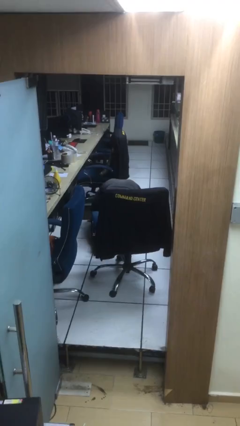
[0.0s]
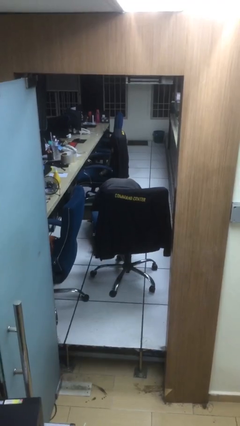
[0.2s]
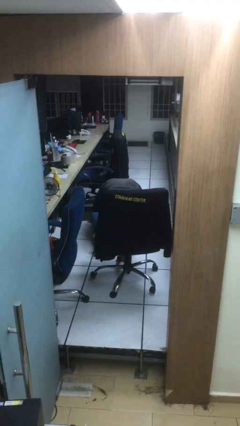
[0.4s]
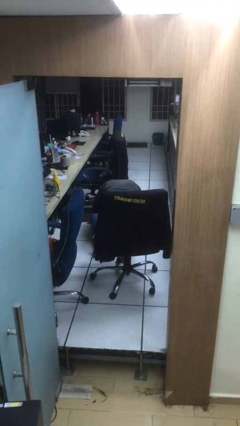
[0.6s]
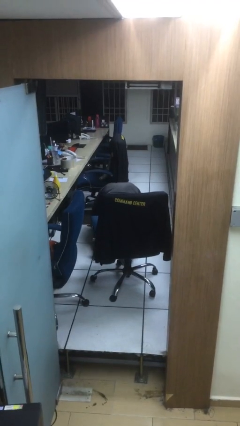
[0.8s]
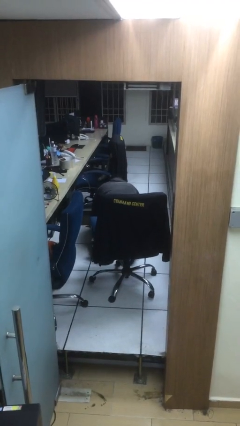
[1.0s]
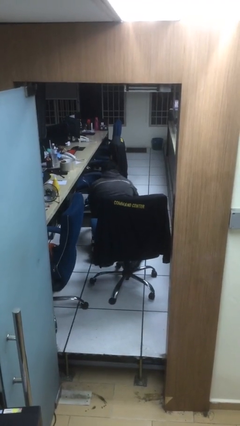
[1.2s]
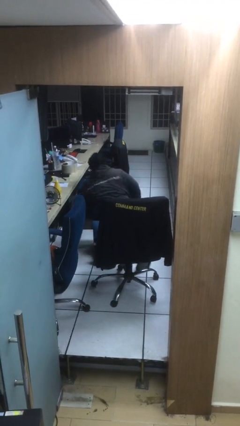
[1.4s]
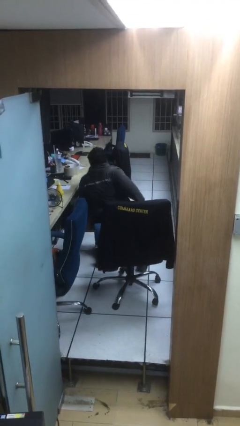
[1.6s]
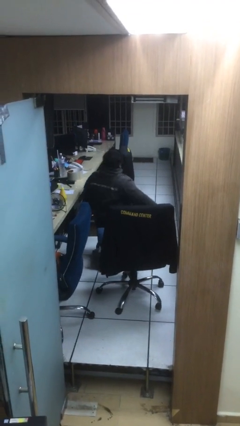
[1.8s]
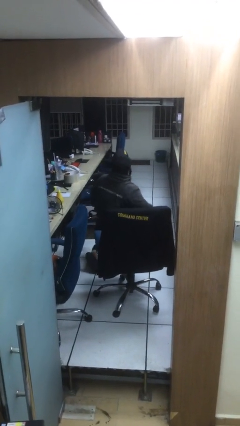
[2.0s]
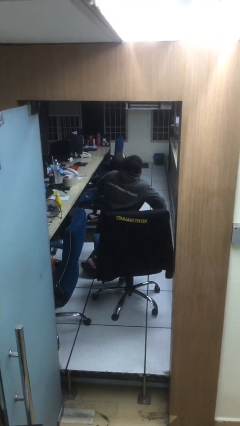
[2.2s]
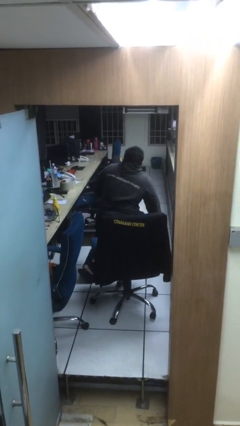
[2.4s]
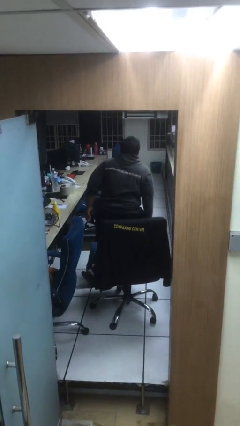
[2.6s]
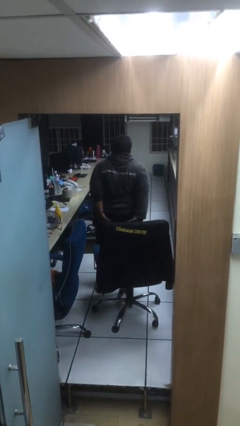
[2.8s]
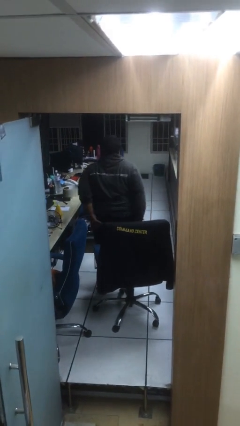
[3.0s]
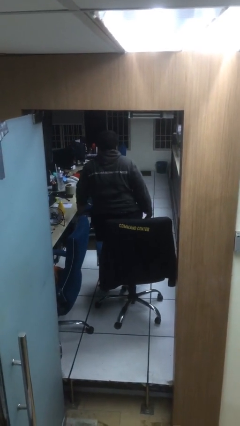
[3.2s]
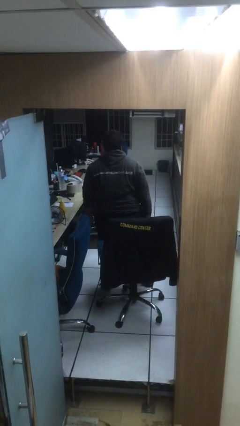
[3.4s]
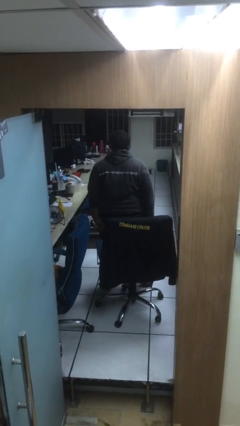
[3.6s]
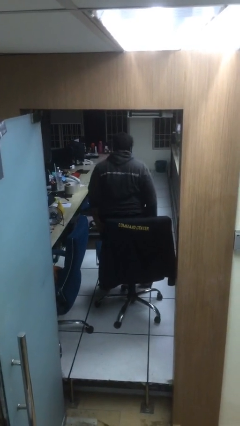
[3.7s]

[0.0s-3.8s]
person stands up from floor

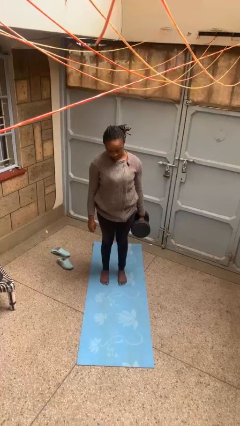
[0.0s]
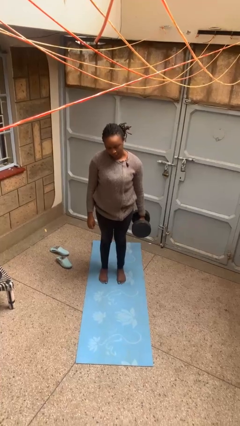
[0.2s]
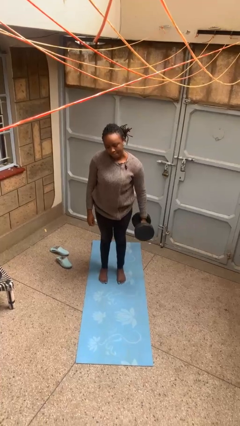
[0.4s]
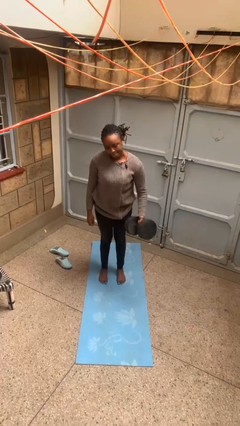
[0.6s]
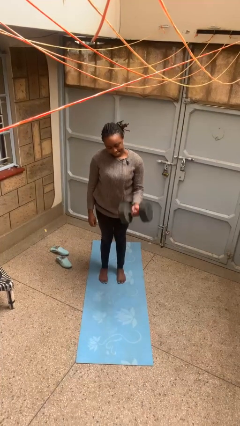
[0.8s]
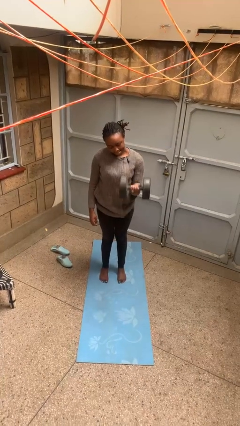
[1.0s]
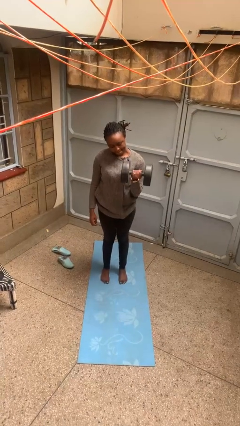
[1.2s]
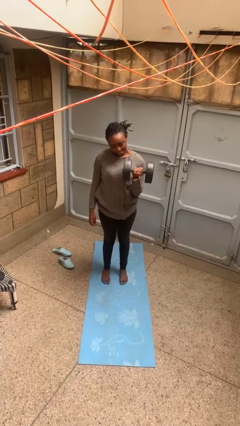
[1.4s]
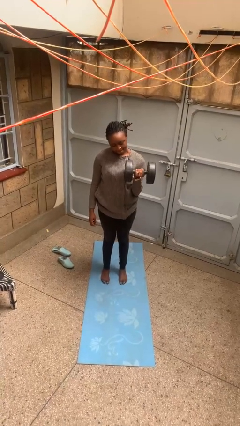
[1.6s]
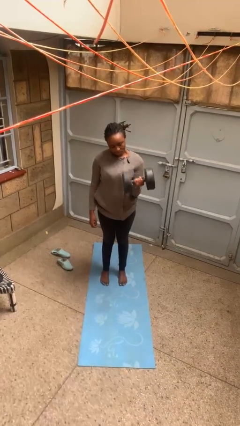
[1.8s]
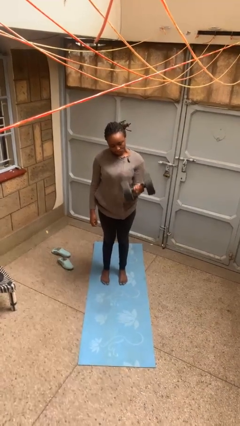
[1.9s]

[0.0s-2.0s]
person lifts dumbbells

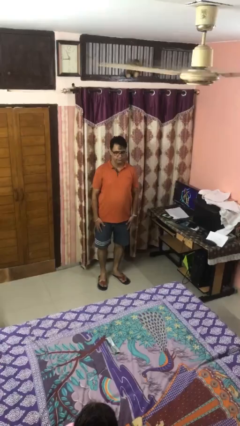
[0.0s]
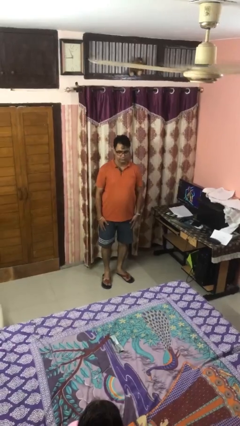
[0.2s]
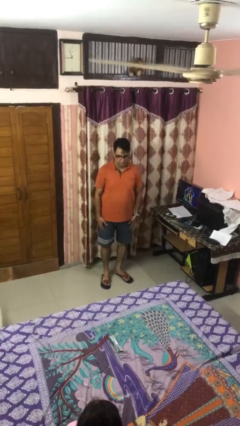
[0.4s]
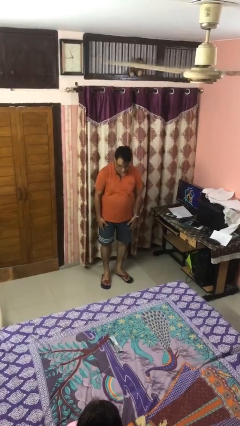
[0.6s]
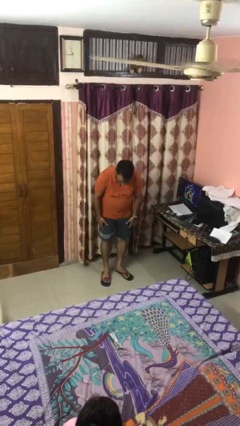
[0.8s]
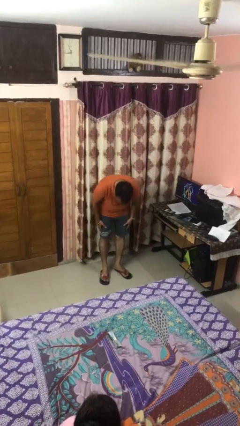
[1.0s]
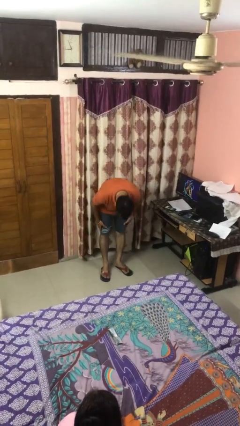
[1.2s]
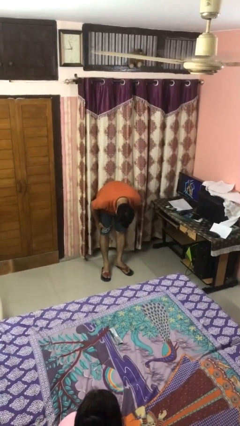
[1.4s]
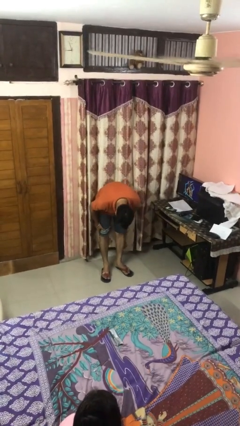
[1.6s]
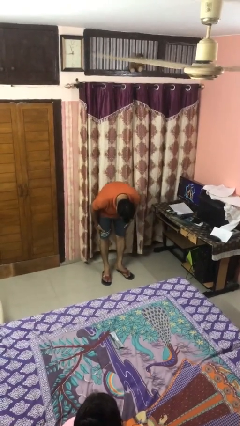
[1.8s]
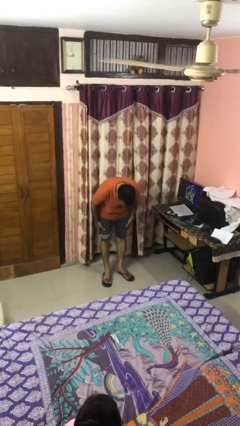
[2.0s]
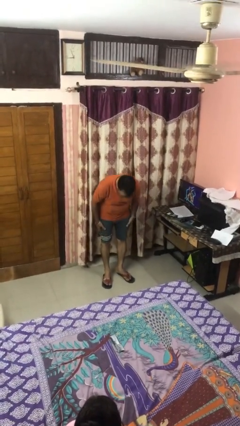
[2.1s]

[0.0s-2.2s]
person bows

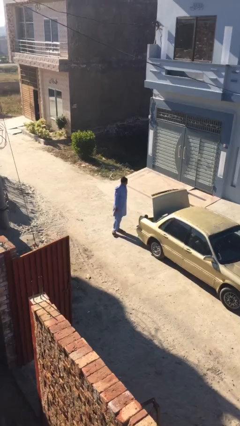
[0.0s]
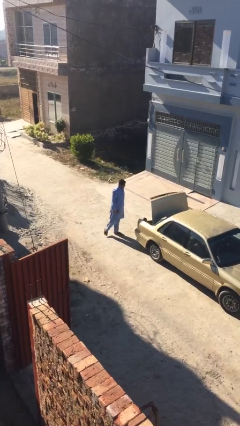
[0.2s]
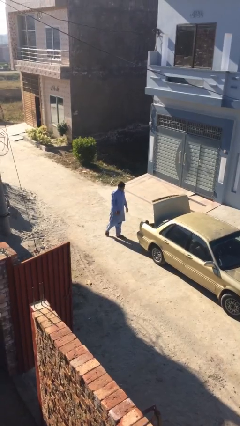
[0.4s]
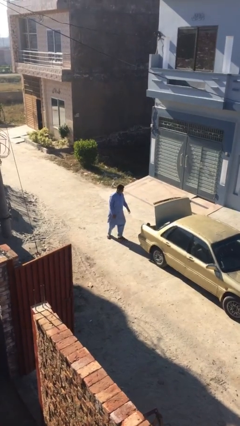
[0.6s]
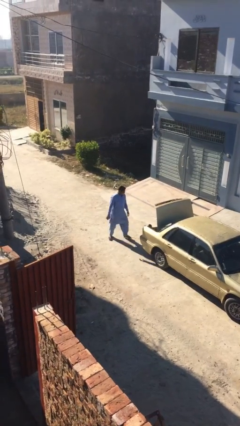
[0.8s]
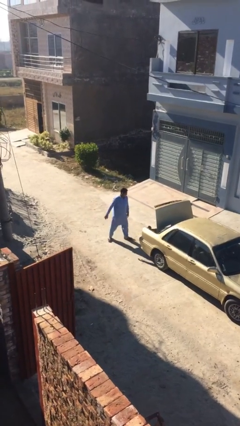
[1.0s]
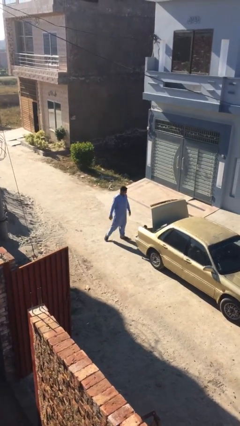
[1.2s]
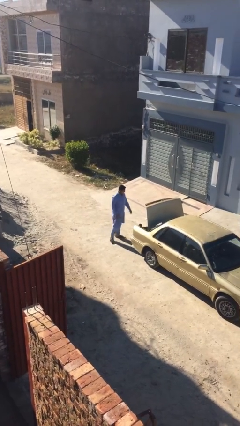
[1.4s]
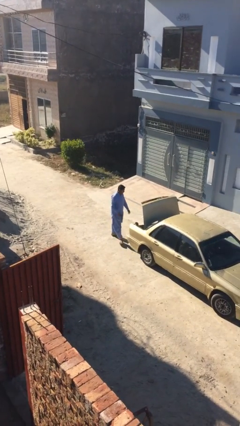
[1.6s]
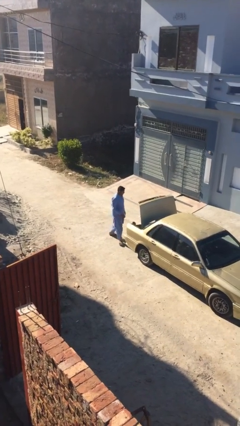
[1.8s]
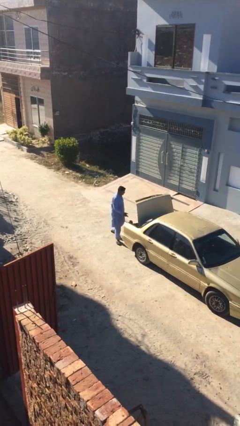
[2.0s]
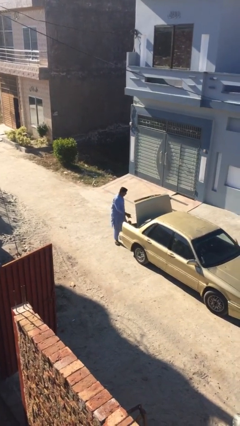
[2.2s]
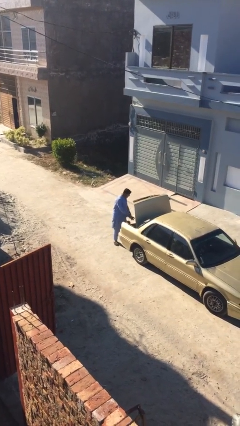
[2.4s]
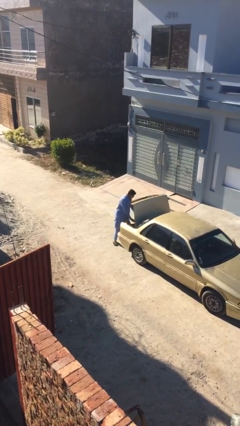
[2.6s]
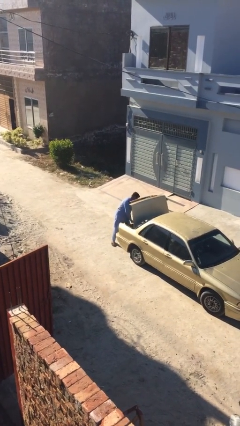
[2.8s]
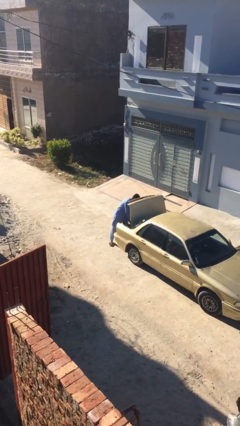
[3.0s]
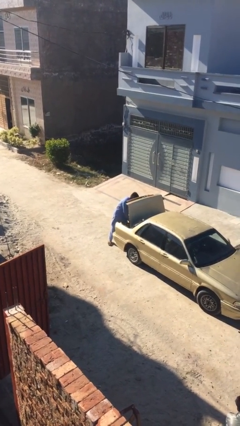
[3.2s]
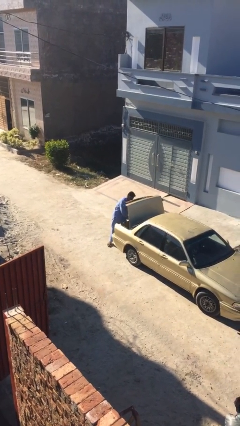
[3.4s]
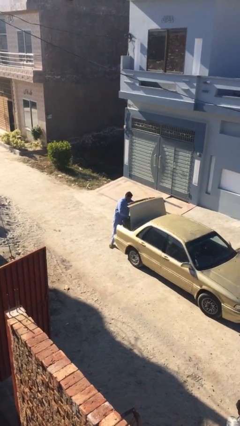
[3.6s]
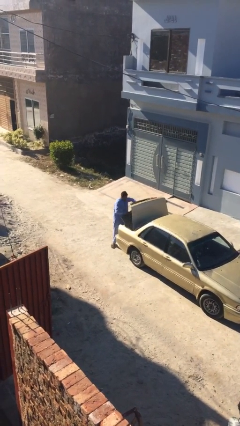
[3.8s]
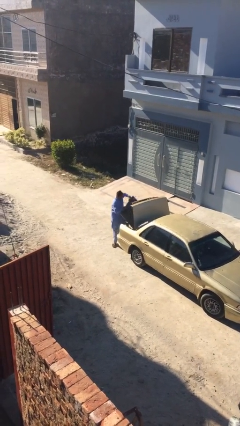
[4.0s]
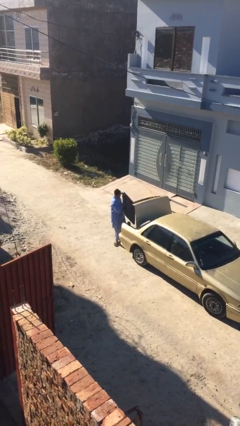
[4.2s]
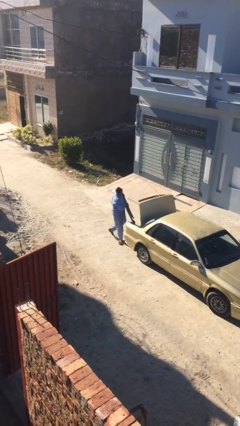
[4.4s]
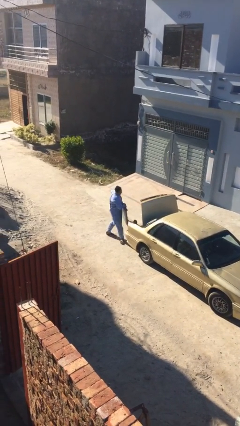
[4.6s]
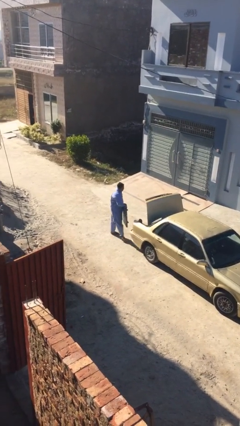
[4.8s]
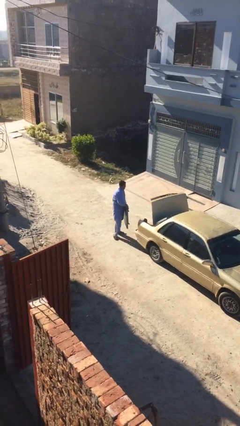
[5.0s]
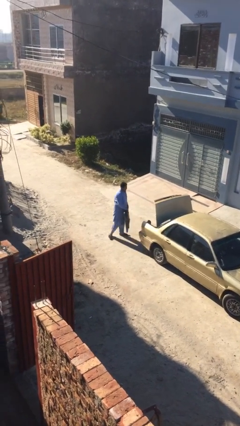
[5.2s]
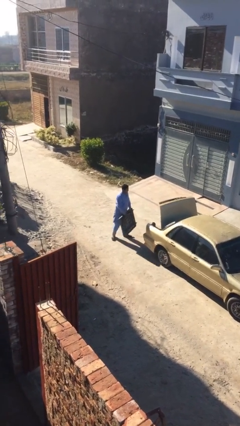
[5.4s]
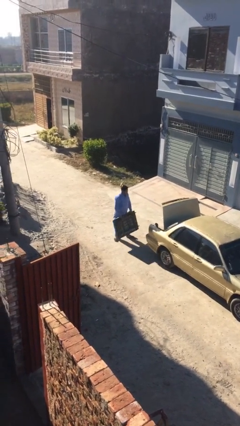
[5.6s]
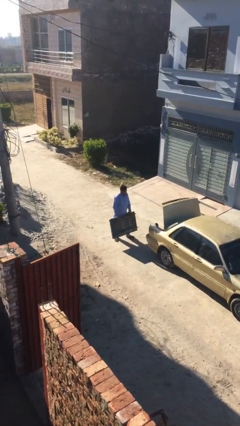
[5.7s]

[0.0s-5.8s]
person unloads car

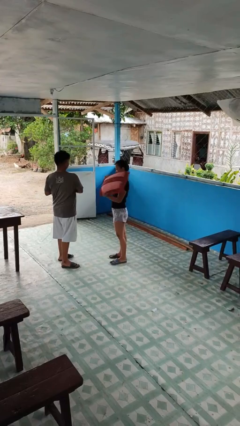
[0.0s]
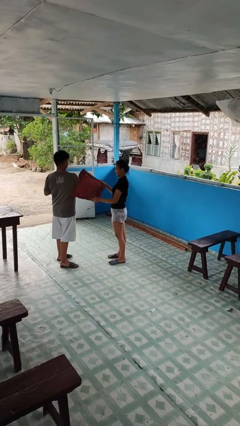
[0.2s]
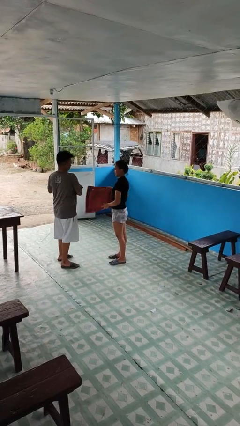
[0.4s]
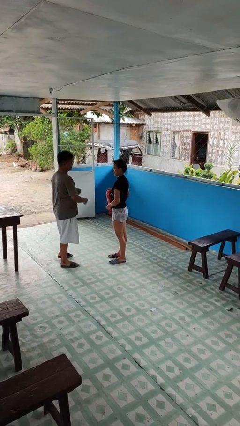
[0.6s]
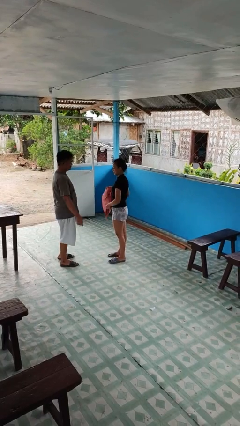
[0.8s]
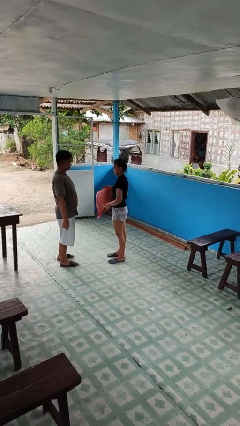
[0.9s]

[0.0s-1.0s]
person hits person with pillow

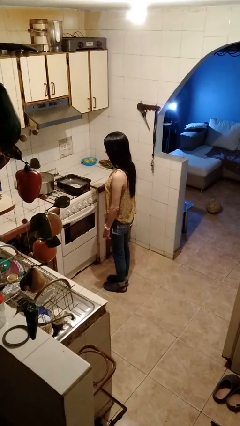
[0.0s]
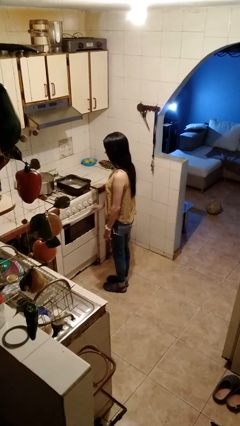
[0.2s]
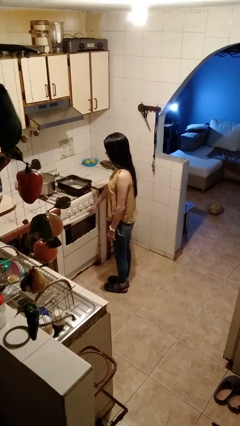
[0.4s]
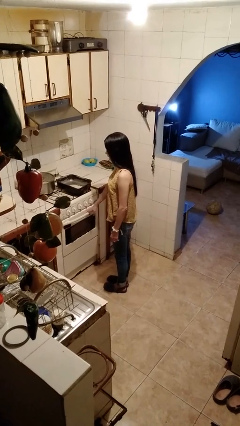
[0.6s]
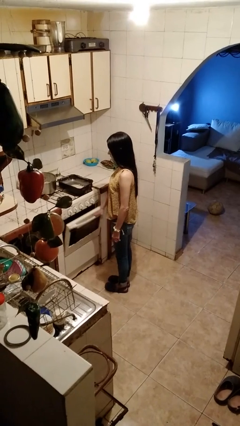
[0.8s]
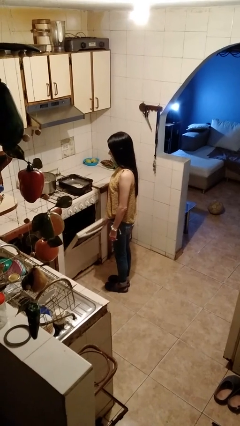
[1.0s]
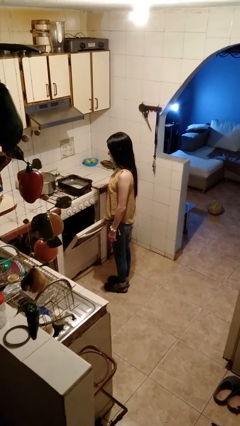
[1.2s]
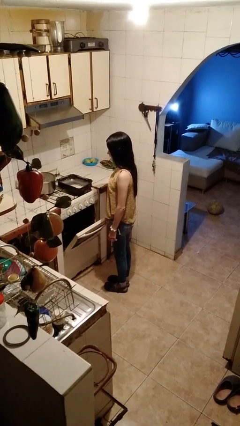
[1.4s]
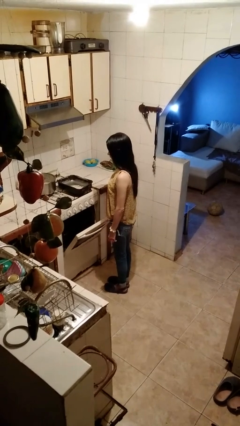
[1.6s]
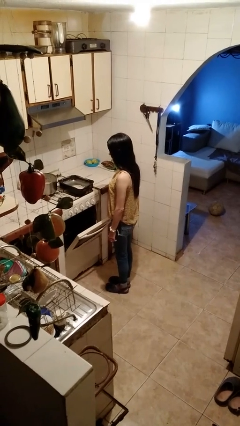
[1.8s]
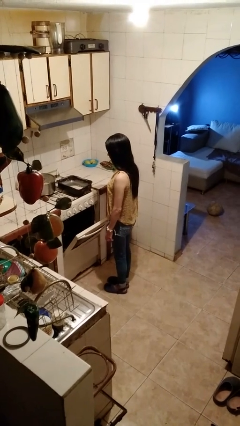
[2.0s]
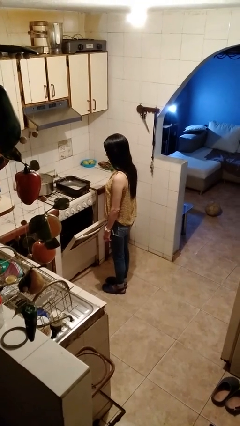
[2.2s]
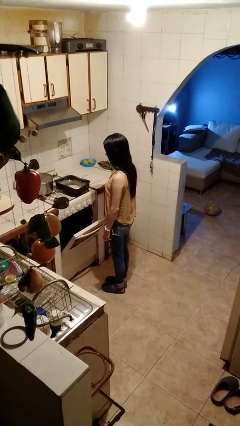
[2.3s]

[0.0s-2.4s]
person opens oven door

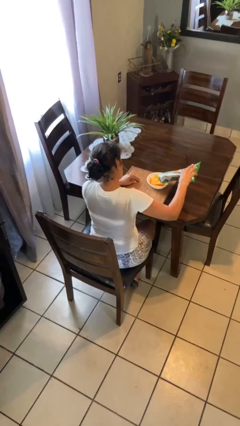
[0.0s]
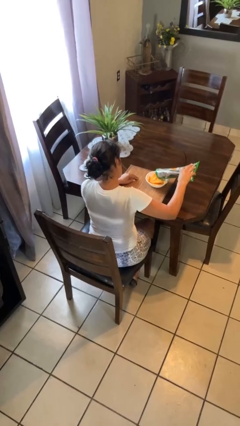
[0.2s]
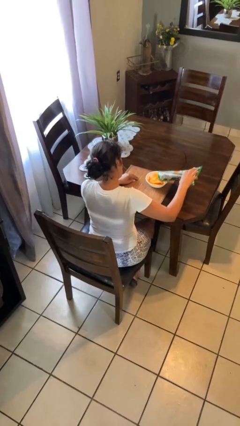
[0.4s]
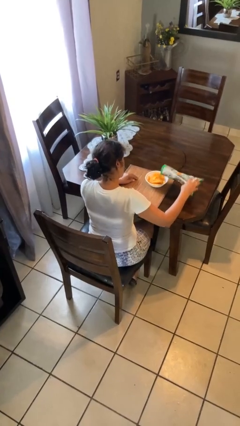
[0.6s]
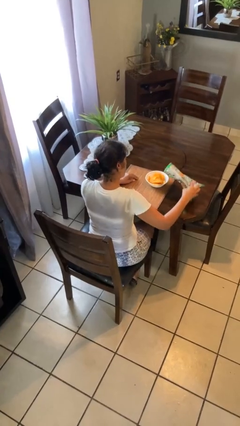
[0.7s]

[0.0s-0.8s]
person pours into bowl
